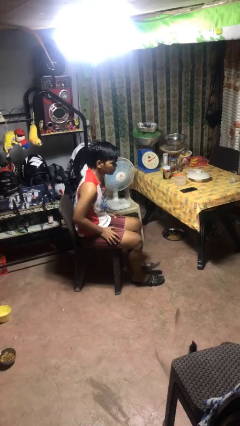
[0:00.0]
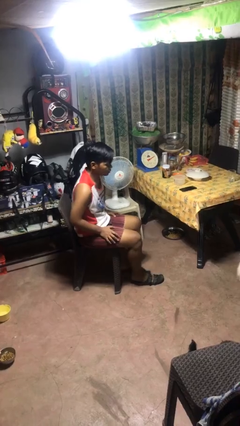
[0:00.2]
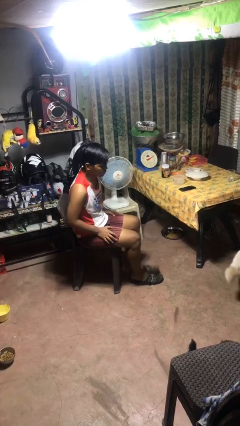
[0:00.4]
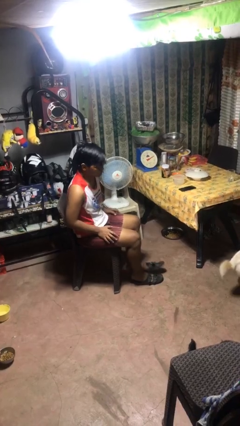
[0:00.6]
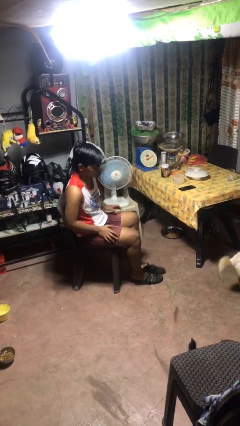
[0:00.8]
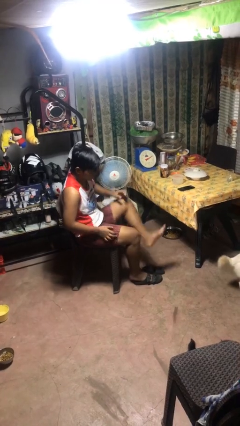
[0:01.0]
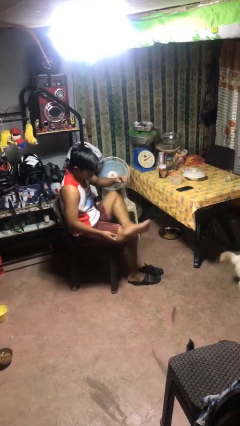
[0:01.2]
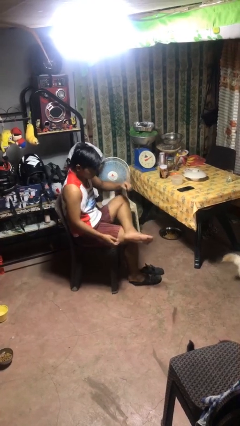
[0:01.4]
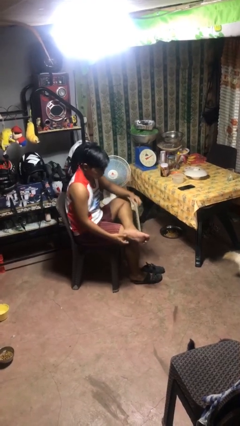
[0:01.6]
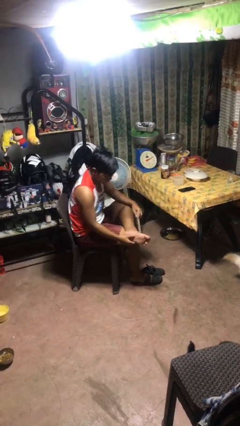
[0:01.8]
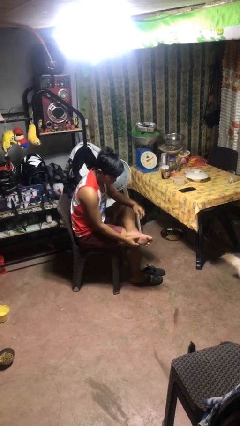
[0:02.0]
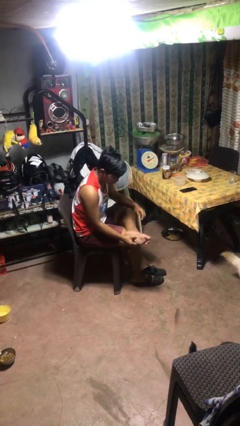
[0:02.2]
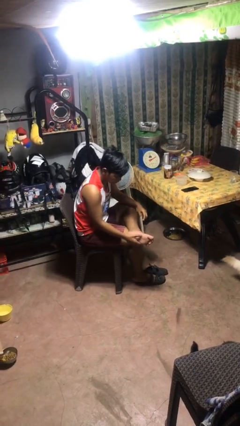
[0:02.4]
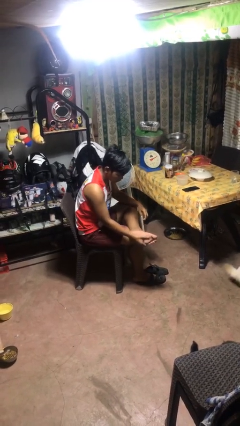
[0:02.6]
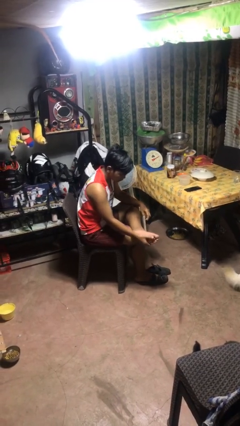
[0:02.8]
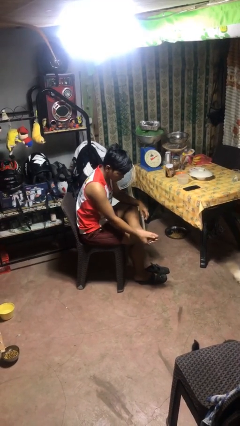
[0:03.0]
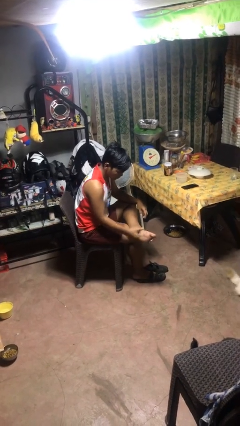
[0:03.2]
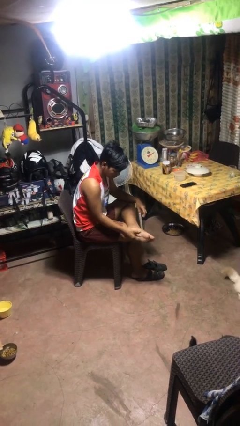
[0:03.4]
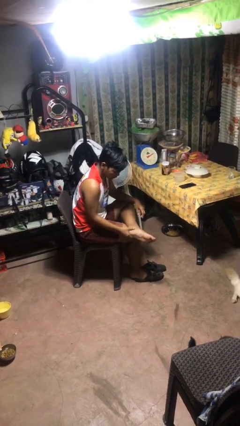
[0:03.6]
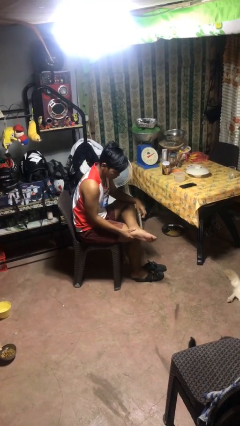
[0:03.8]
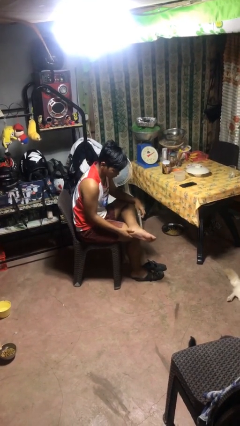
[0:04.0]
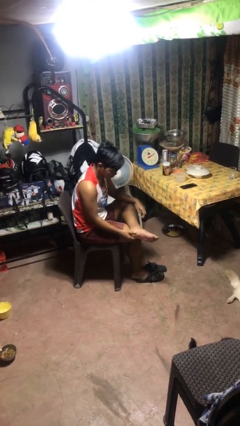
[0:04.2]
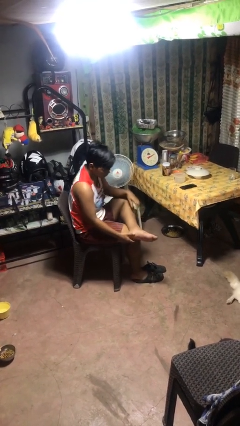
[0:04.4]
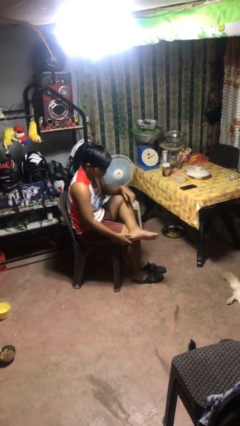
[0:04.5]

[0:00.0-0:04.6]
person rubs foot

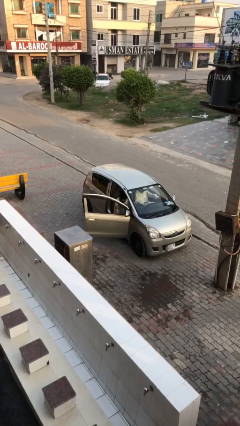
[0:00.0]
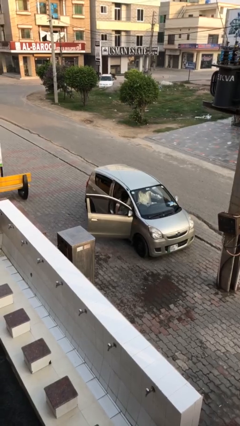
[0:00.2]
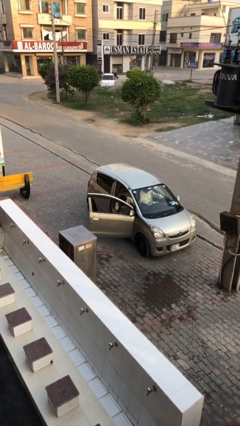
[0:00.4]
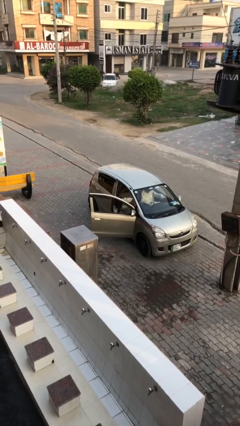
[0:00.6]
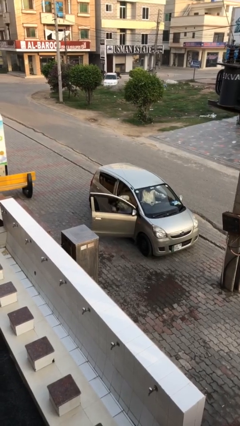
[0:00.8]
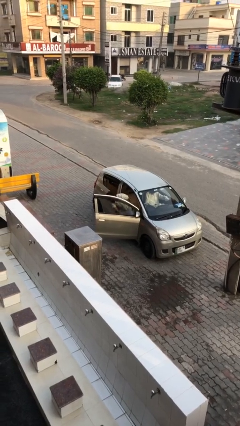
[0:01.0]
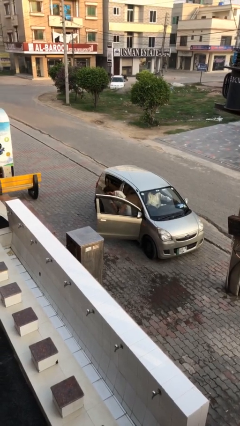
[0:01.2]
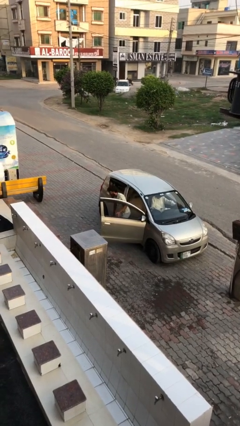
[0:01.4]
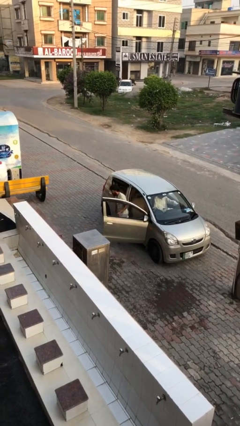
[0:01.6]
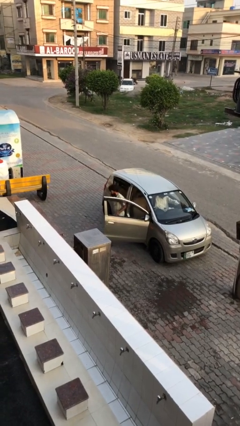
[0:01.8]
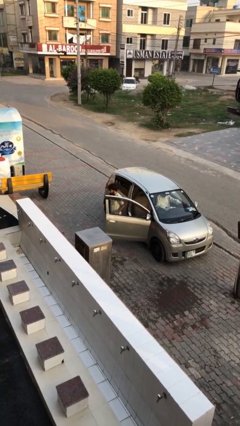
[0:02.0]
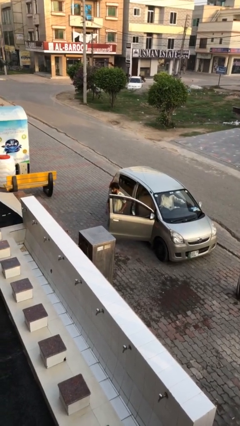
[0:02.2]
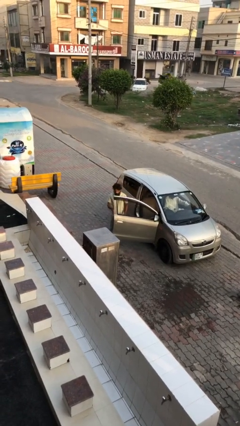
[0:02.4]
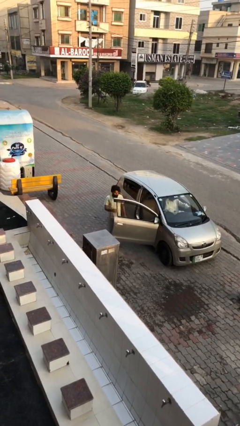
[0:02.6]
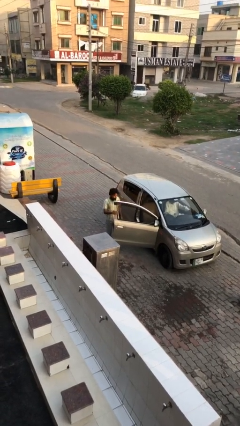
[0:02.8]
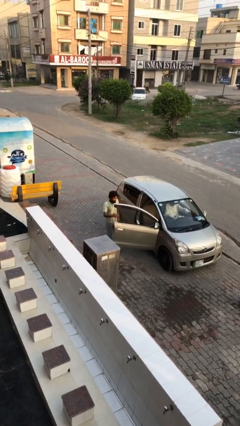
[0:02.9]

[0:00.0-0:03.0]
person exits car

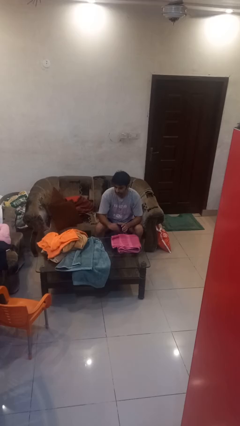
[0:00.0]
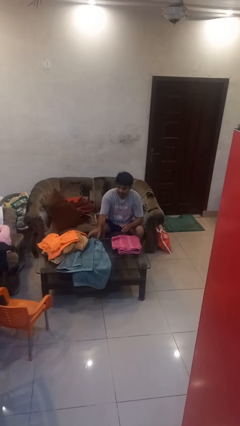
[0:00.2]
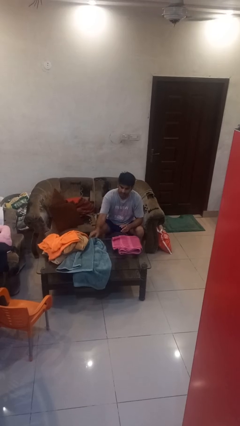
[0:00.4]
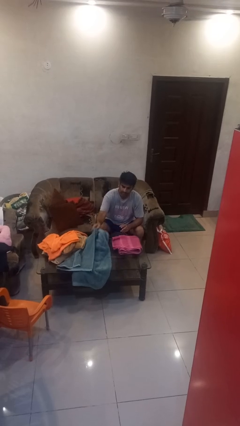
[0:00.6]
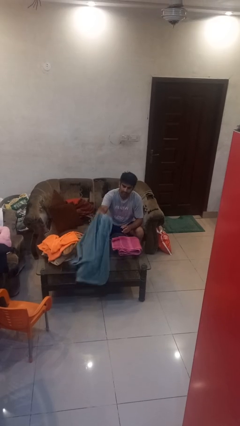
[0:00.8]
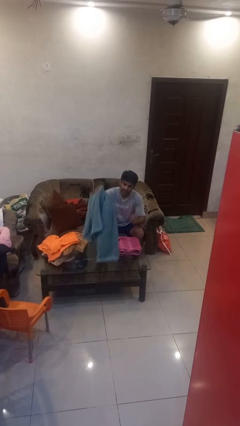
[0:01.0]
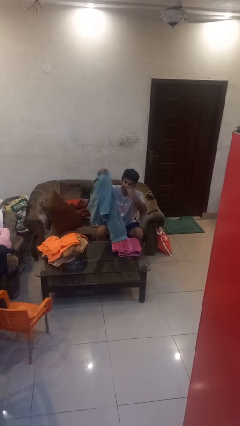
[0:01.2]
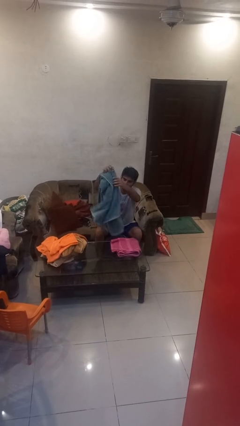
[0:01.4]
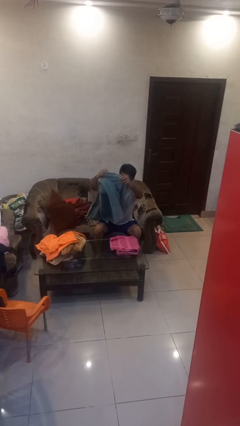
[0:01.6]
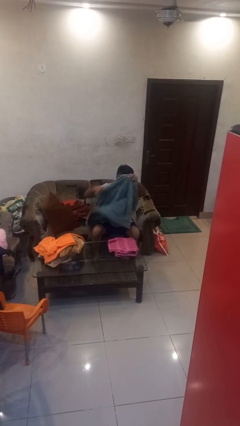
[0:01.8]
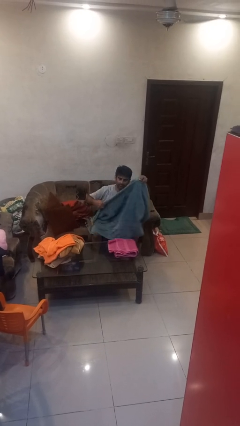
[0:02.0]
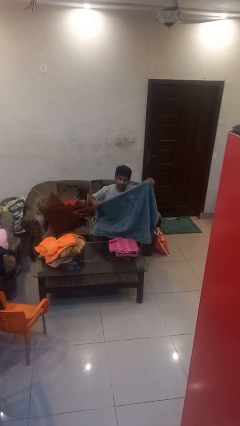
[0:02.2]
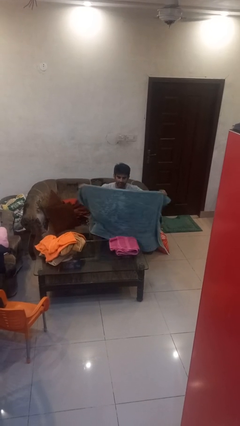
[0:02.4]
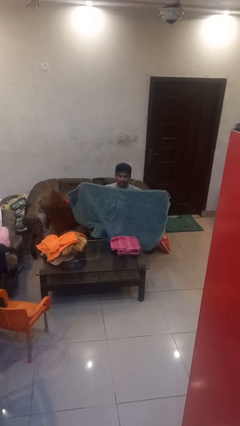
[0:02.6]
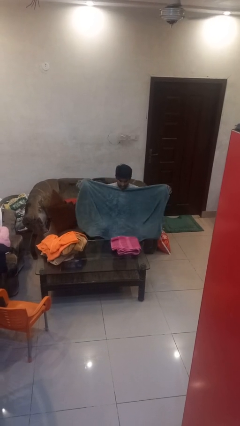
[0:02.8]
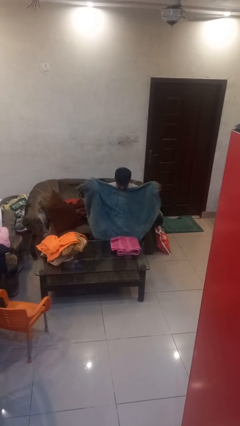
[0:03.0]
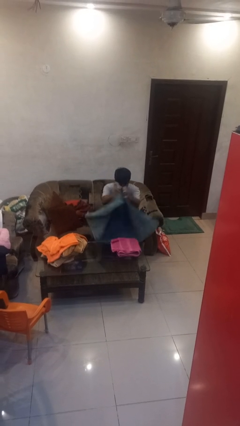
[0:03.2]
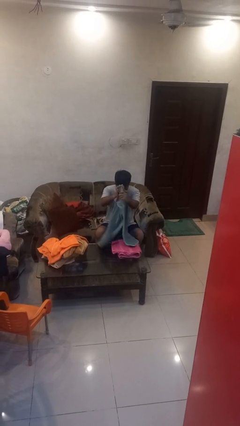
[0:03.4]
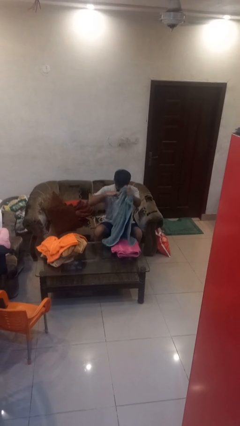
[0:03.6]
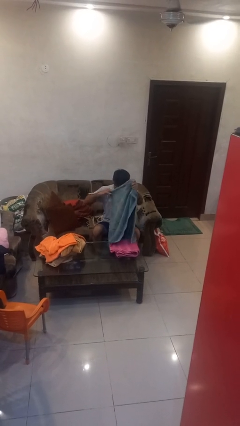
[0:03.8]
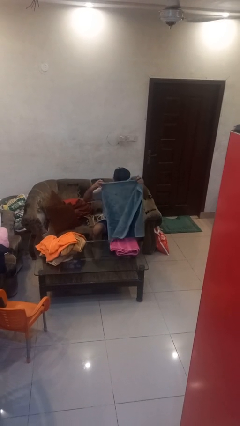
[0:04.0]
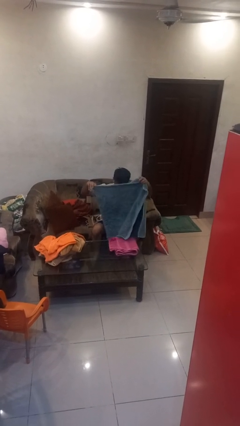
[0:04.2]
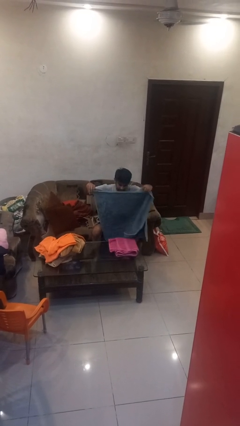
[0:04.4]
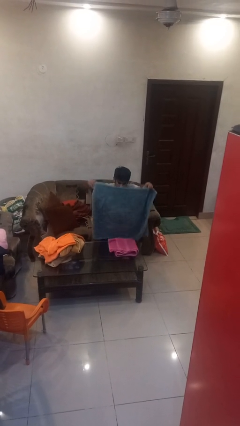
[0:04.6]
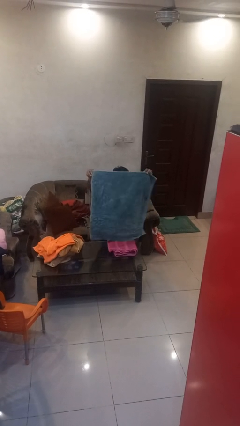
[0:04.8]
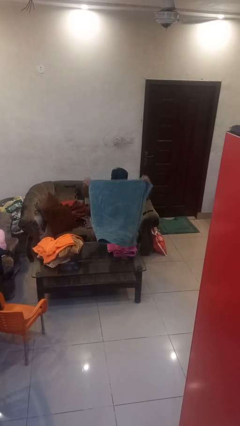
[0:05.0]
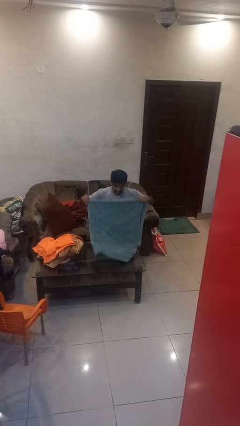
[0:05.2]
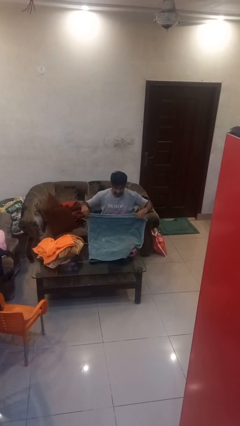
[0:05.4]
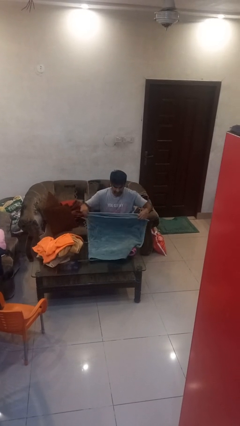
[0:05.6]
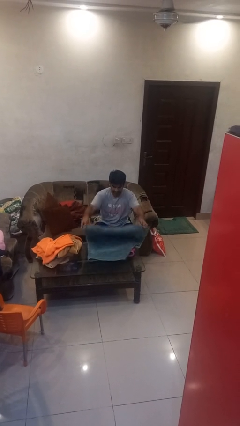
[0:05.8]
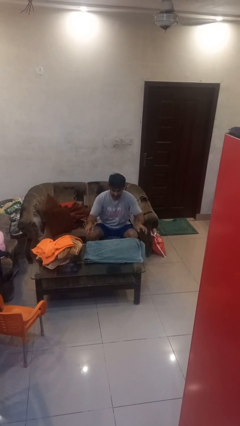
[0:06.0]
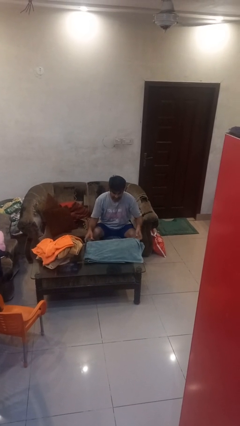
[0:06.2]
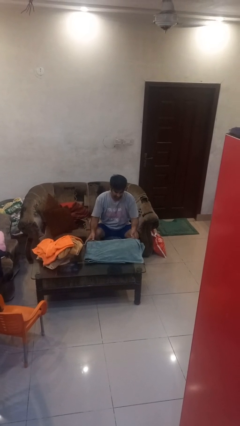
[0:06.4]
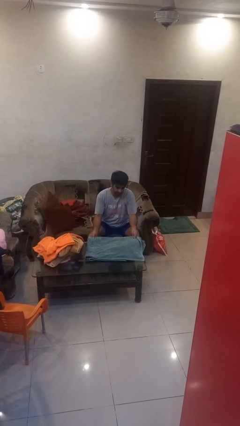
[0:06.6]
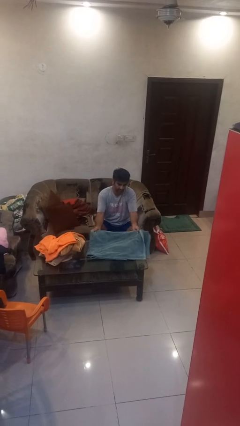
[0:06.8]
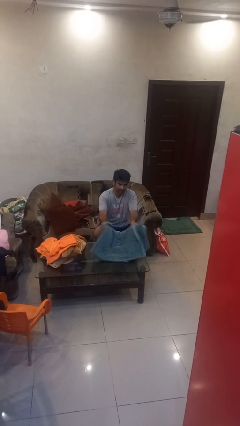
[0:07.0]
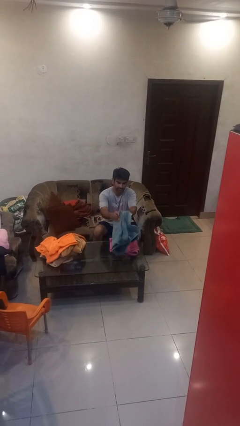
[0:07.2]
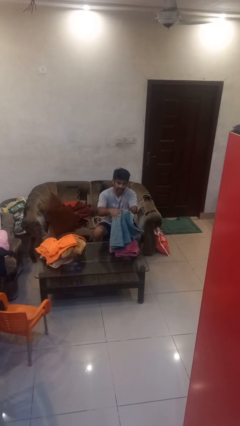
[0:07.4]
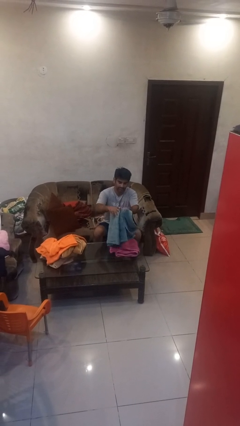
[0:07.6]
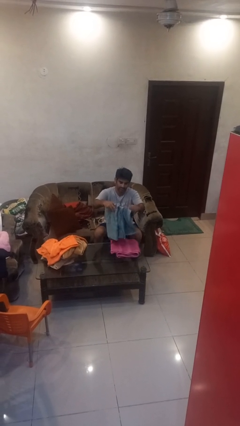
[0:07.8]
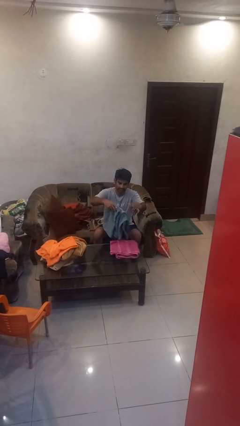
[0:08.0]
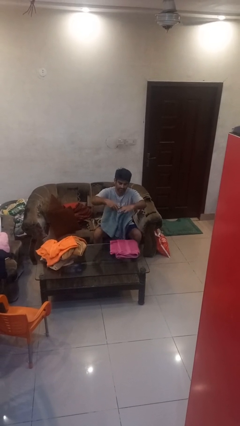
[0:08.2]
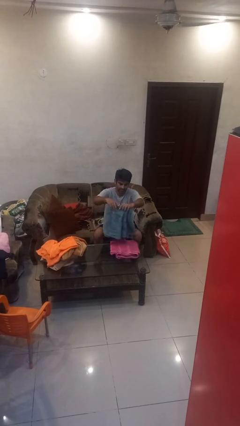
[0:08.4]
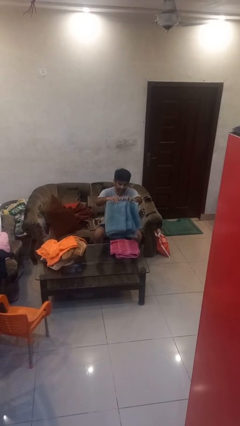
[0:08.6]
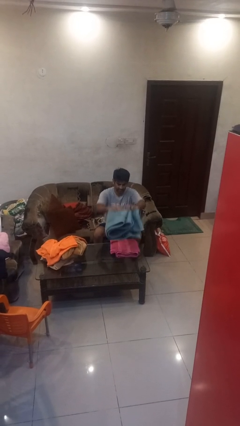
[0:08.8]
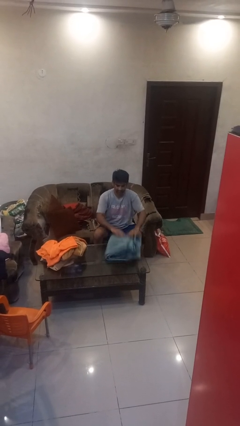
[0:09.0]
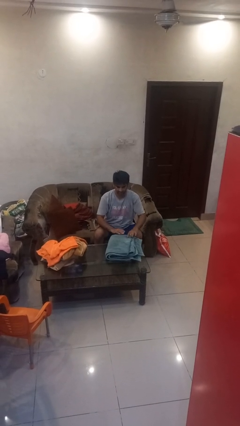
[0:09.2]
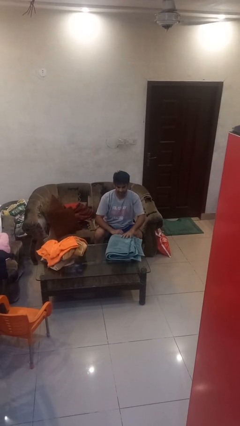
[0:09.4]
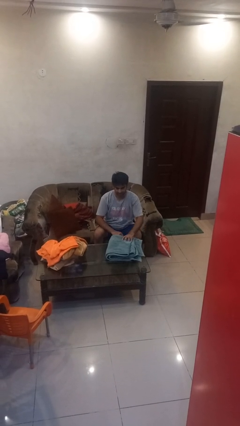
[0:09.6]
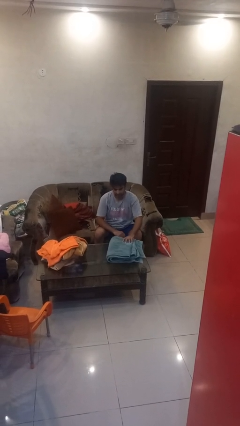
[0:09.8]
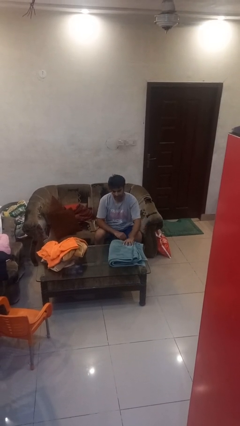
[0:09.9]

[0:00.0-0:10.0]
person folds towel

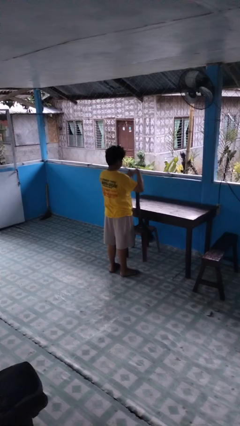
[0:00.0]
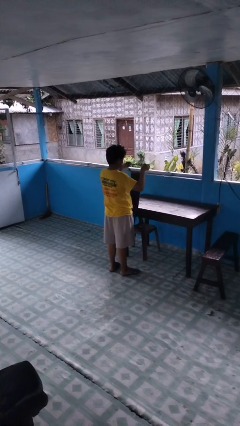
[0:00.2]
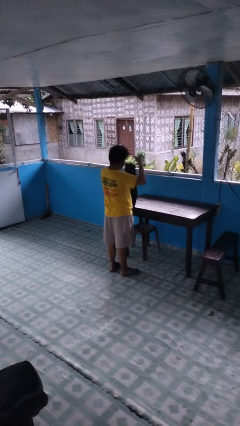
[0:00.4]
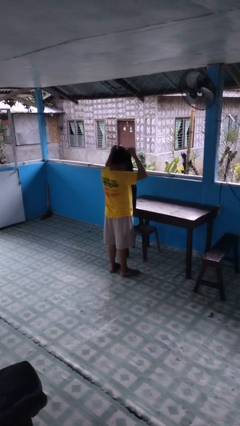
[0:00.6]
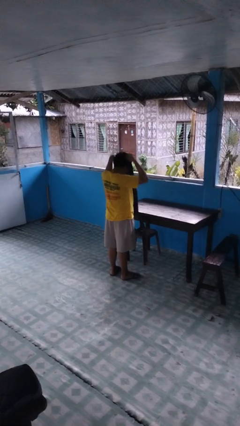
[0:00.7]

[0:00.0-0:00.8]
person puts on apron
